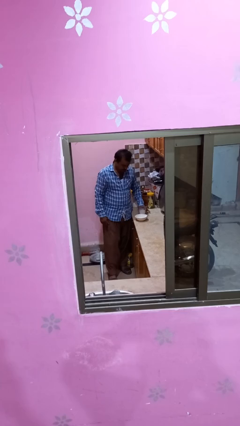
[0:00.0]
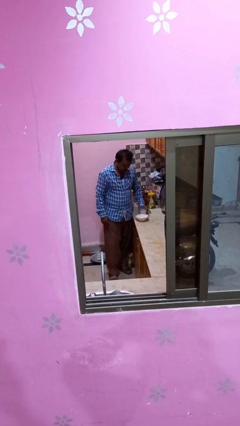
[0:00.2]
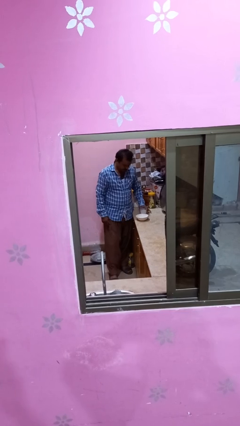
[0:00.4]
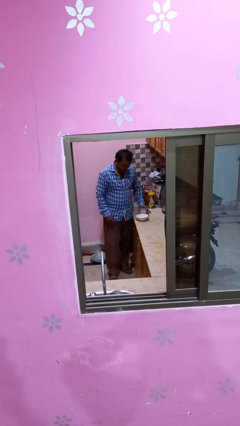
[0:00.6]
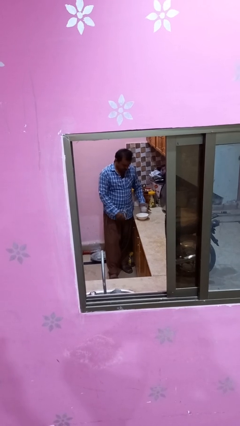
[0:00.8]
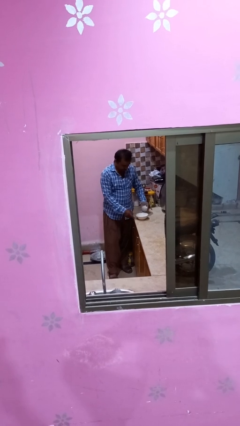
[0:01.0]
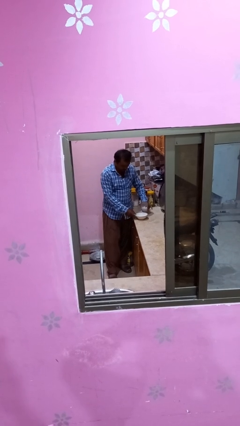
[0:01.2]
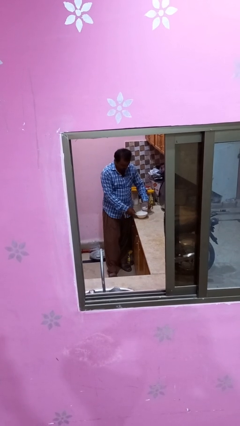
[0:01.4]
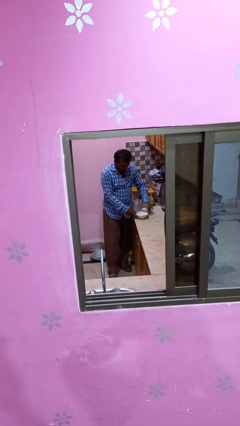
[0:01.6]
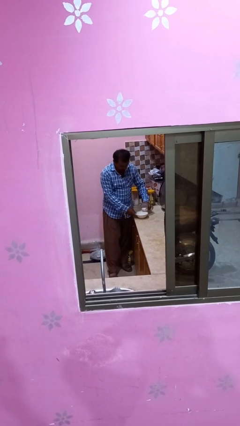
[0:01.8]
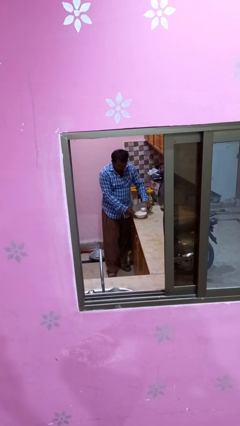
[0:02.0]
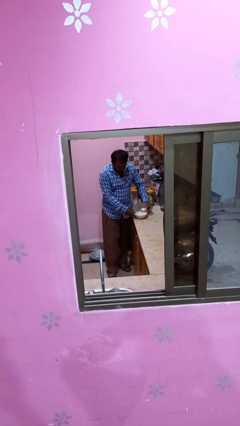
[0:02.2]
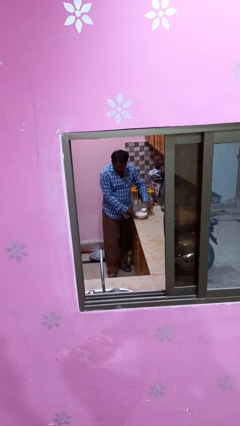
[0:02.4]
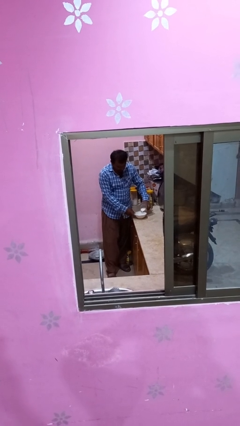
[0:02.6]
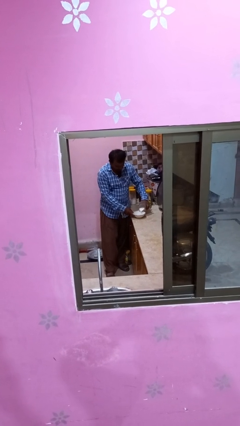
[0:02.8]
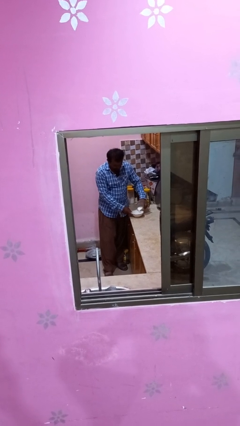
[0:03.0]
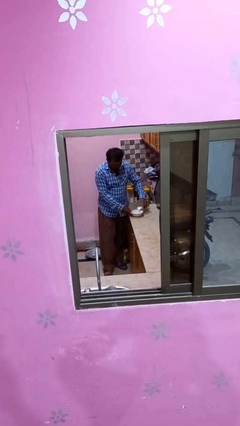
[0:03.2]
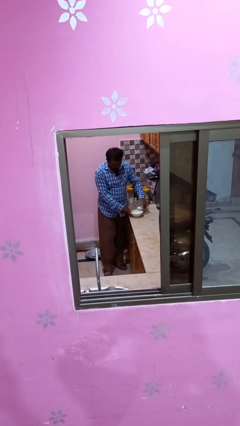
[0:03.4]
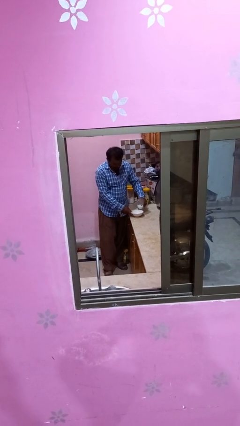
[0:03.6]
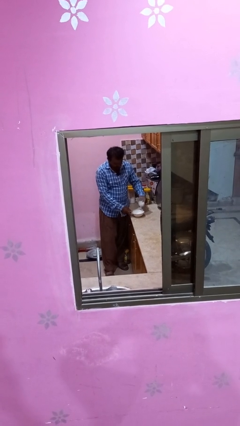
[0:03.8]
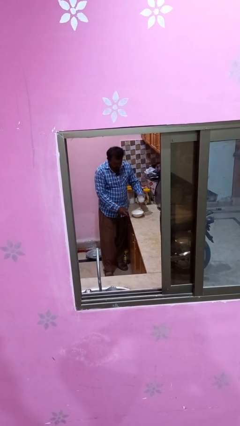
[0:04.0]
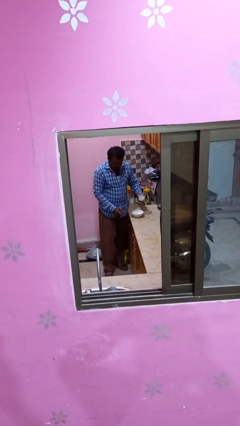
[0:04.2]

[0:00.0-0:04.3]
person pours into bowl

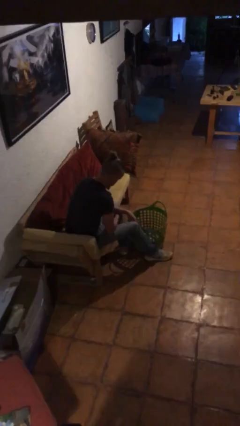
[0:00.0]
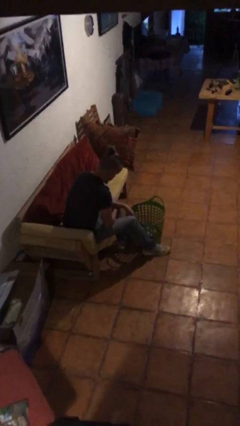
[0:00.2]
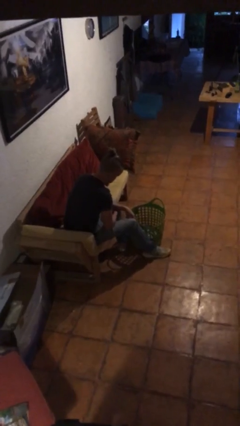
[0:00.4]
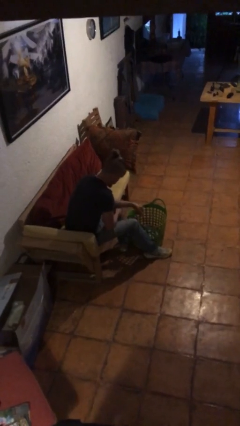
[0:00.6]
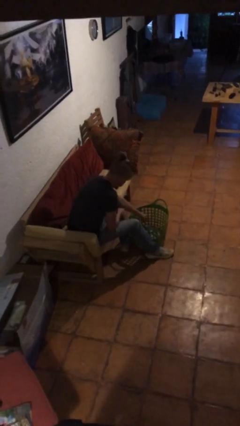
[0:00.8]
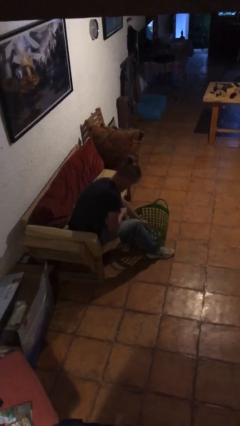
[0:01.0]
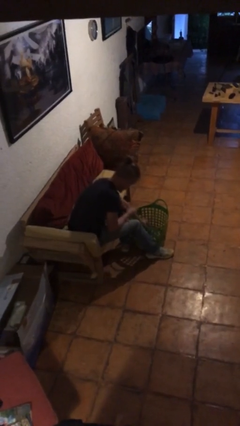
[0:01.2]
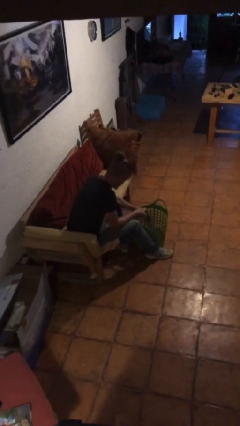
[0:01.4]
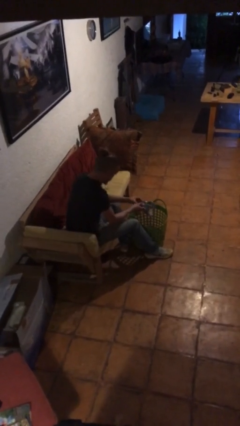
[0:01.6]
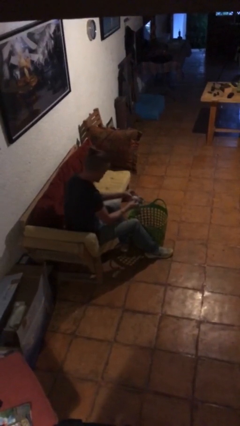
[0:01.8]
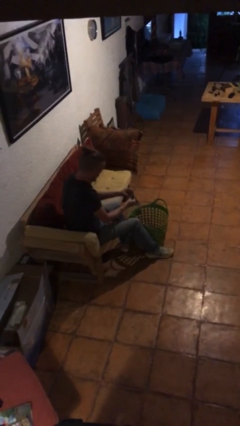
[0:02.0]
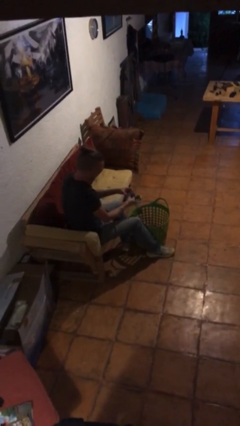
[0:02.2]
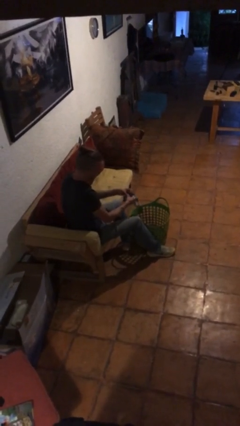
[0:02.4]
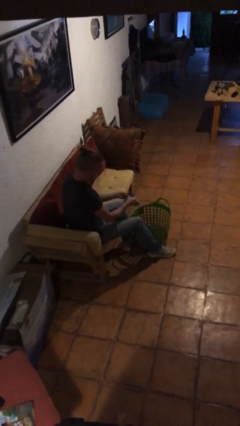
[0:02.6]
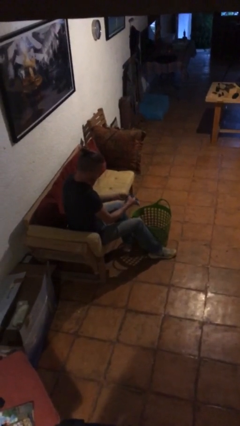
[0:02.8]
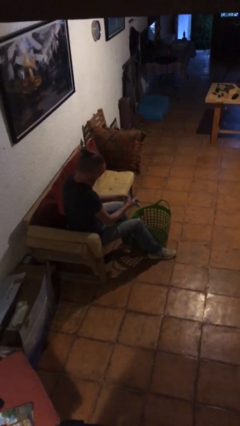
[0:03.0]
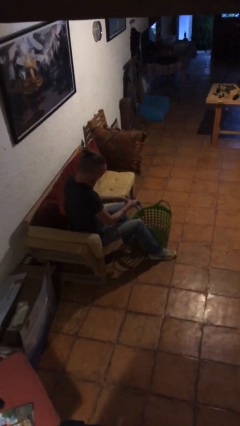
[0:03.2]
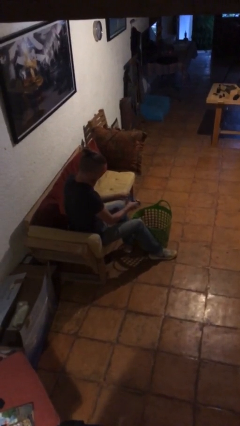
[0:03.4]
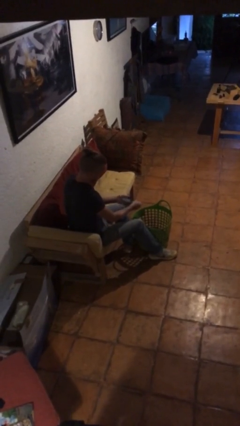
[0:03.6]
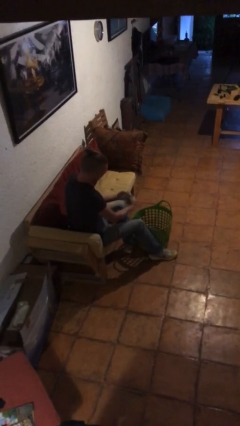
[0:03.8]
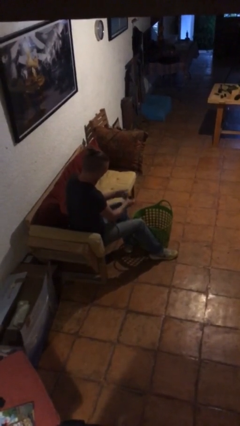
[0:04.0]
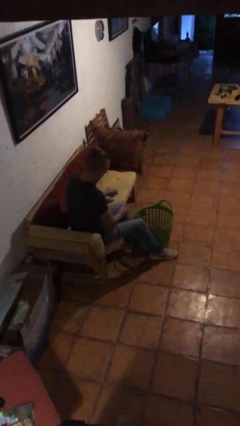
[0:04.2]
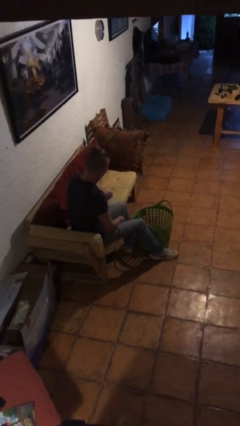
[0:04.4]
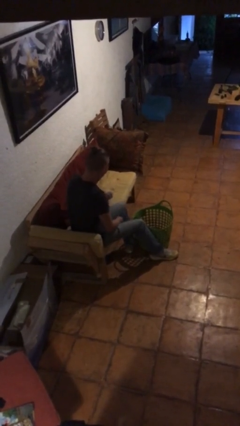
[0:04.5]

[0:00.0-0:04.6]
person folds socks

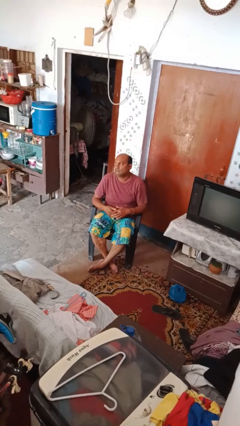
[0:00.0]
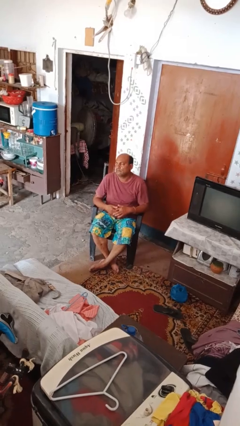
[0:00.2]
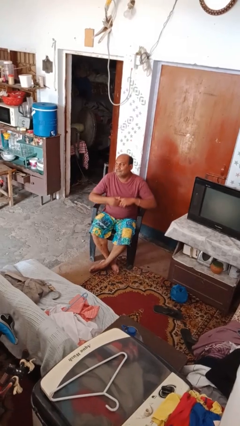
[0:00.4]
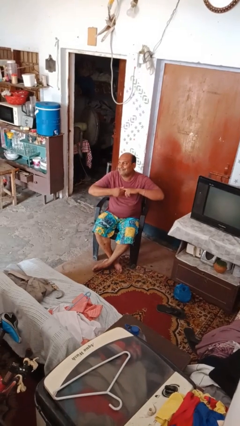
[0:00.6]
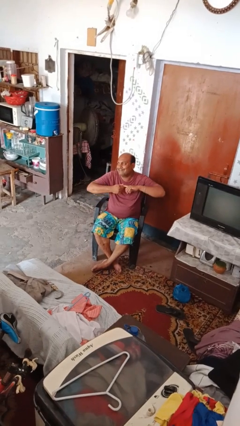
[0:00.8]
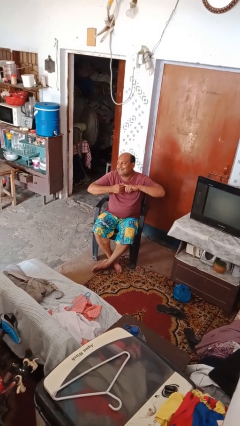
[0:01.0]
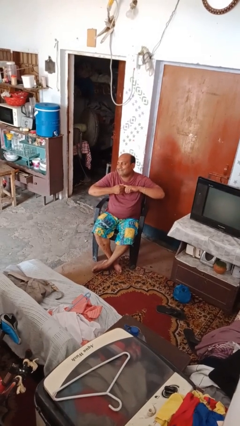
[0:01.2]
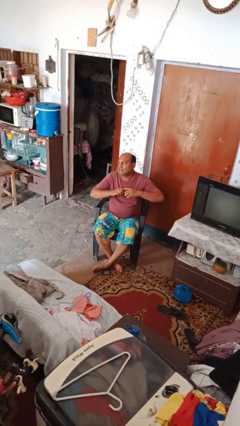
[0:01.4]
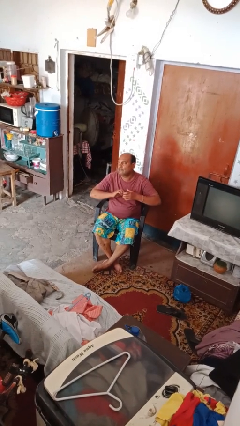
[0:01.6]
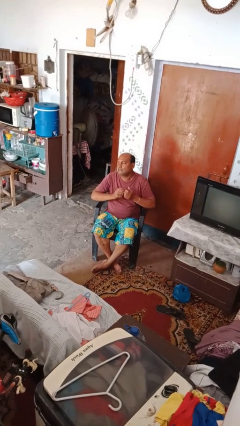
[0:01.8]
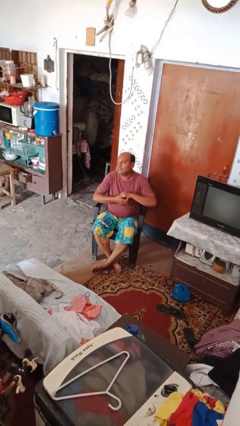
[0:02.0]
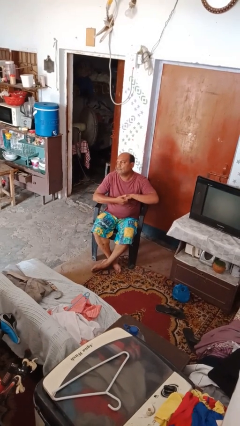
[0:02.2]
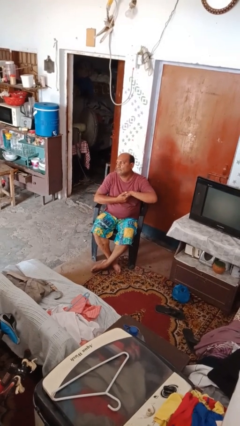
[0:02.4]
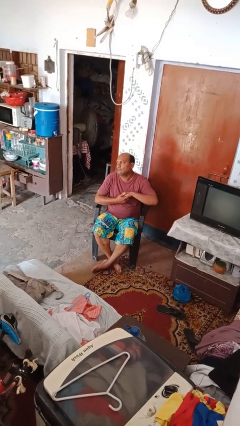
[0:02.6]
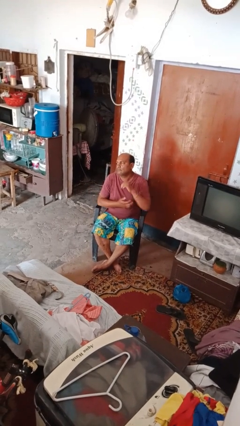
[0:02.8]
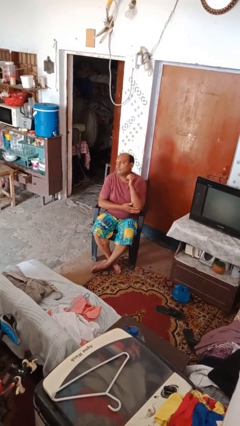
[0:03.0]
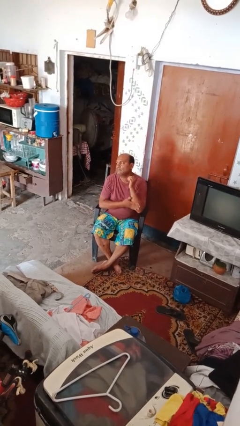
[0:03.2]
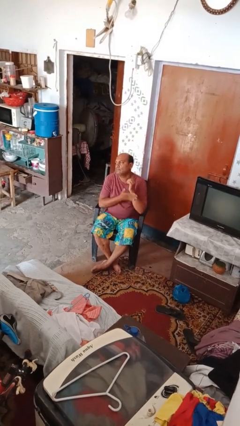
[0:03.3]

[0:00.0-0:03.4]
person cracks knuckles

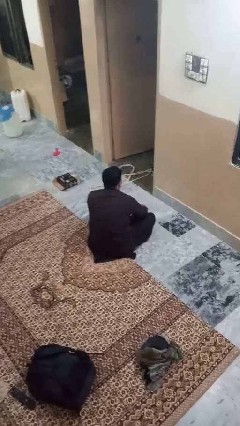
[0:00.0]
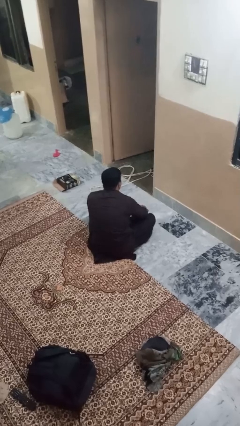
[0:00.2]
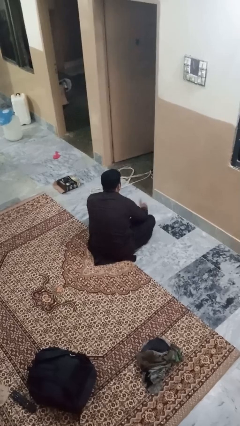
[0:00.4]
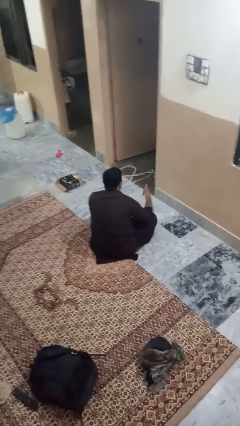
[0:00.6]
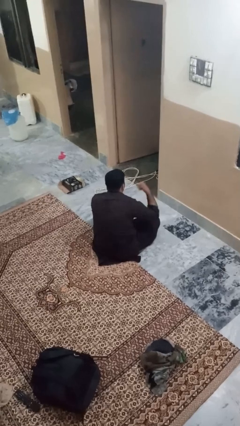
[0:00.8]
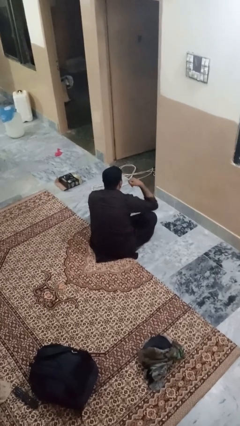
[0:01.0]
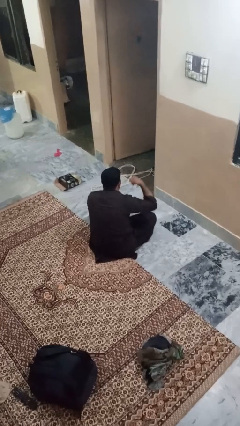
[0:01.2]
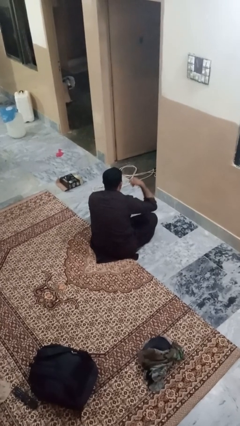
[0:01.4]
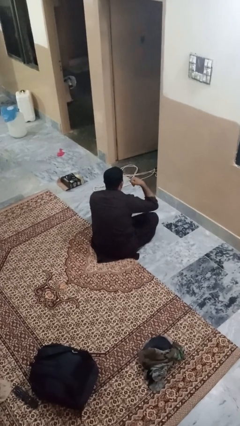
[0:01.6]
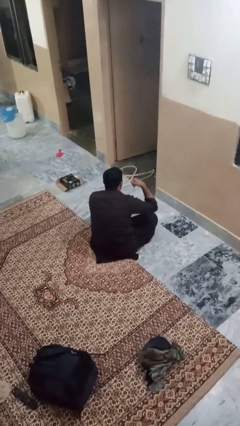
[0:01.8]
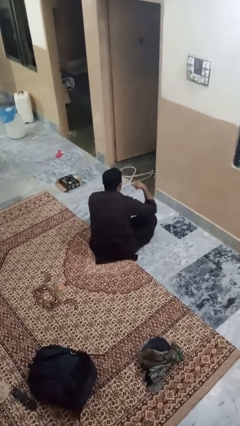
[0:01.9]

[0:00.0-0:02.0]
person gestures call me

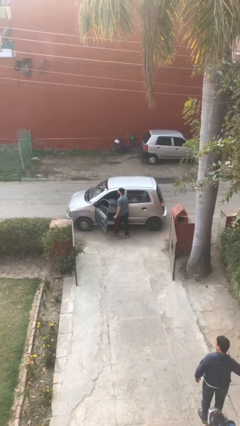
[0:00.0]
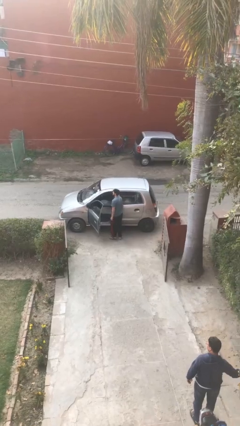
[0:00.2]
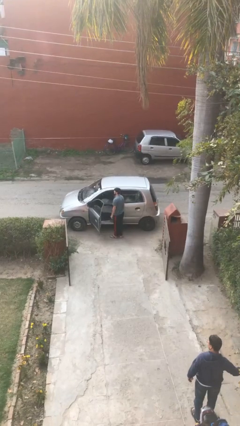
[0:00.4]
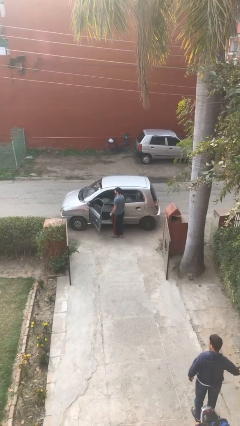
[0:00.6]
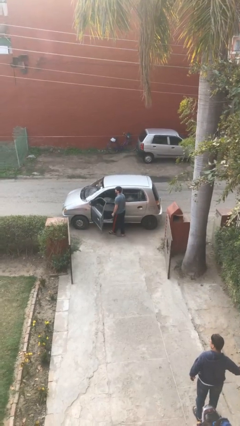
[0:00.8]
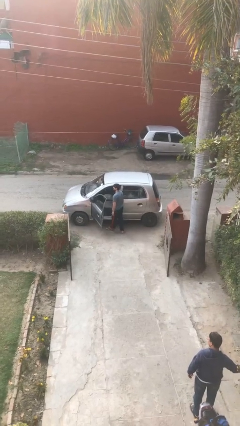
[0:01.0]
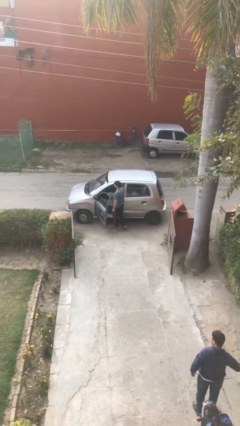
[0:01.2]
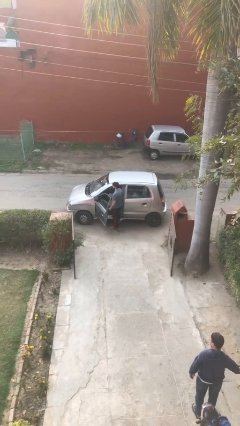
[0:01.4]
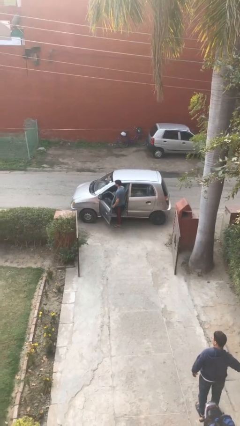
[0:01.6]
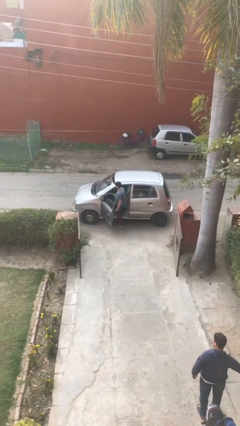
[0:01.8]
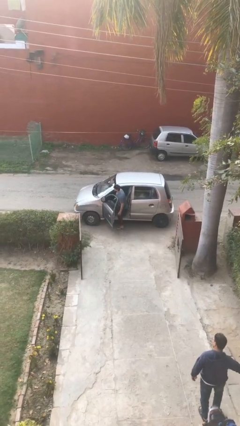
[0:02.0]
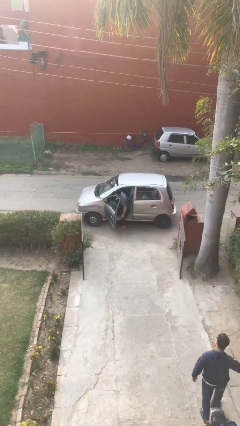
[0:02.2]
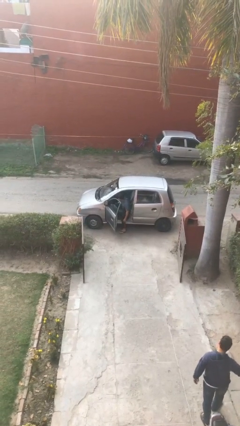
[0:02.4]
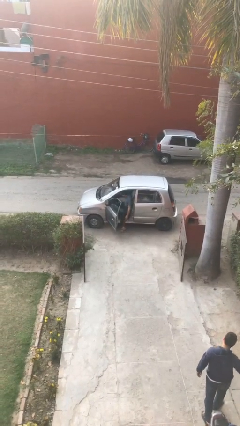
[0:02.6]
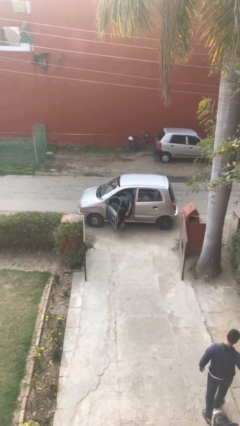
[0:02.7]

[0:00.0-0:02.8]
person enters car

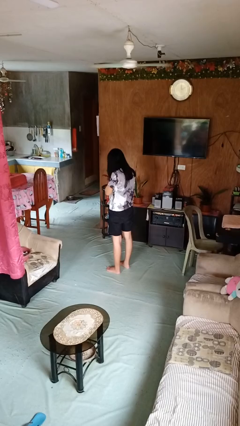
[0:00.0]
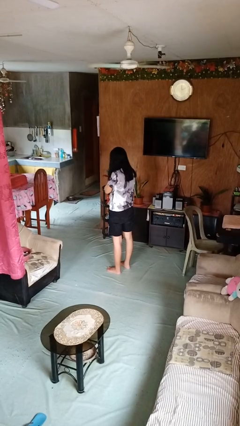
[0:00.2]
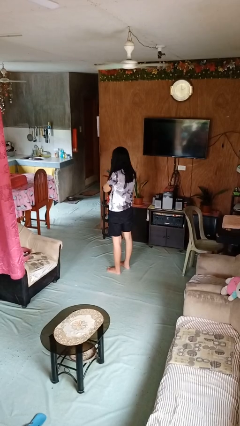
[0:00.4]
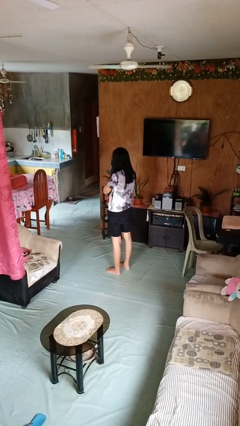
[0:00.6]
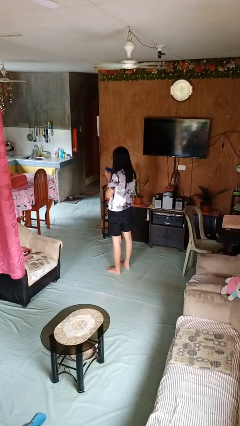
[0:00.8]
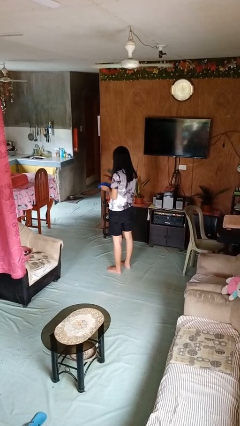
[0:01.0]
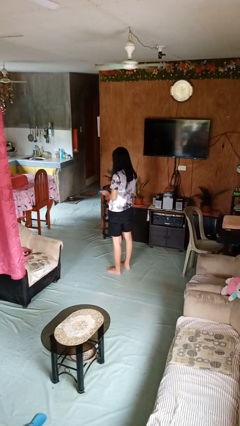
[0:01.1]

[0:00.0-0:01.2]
person blows nose
